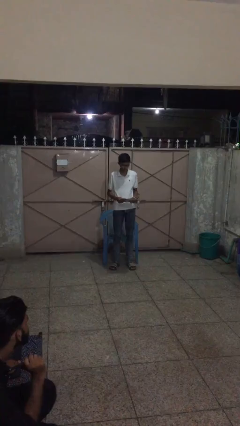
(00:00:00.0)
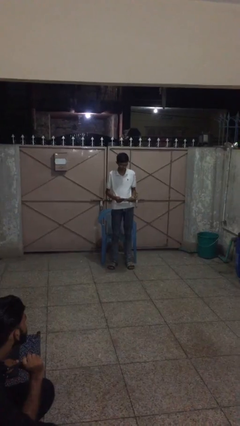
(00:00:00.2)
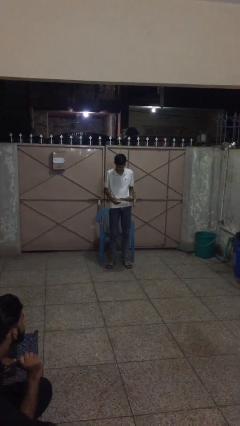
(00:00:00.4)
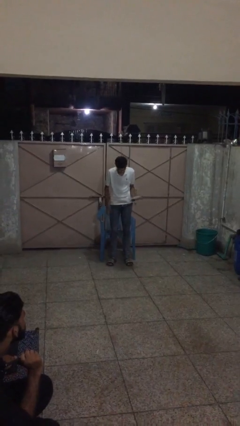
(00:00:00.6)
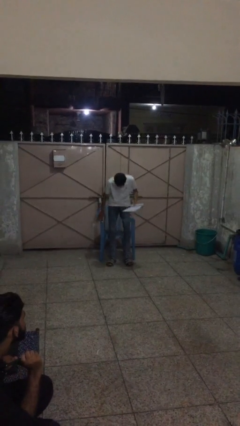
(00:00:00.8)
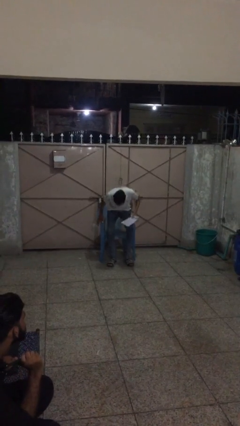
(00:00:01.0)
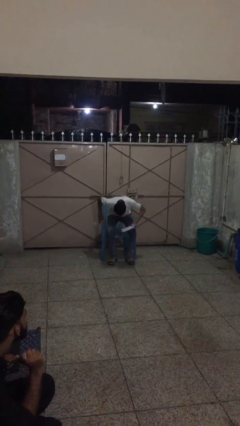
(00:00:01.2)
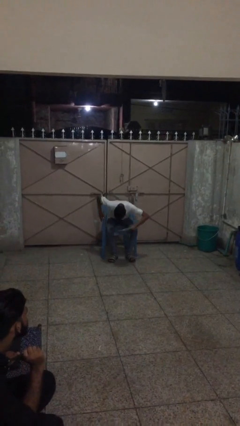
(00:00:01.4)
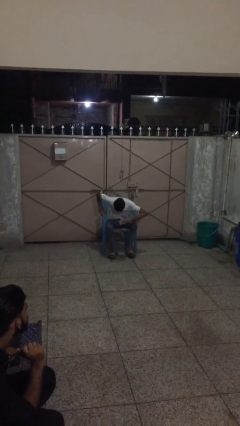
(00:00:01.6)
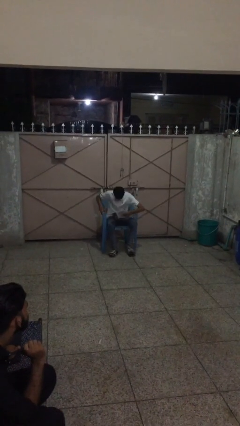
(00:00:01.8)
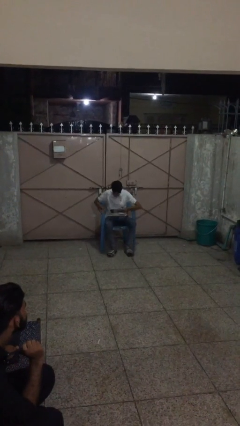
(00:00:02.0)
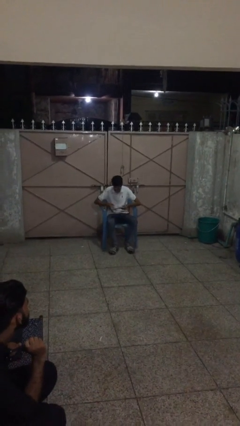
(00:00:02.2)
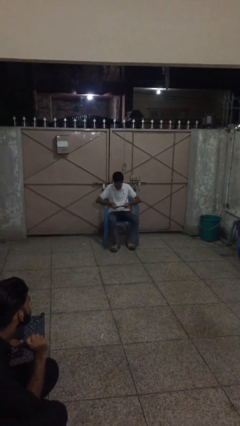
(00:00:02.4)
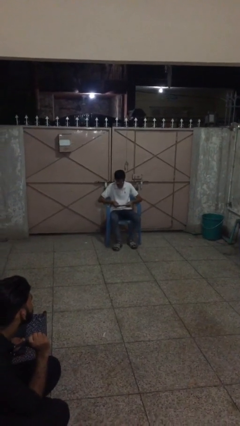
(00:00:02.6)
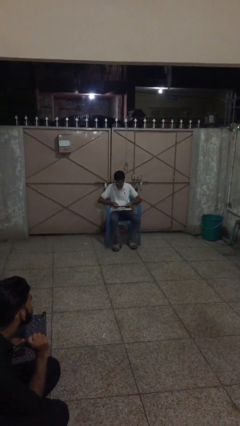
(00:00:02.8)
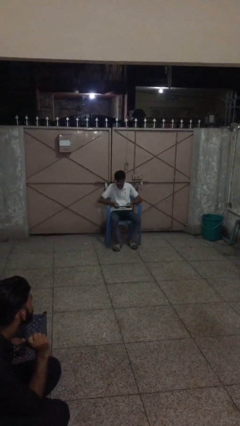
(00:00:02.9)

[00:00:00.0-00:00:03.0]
person sits down

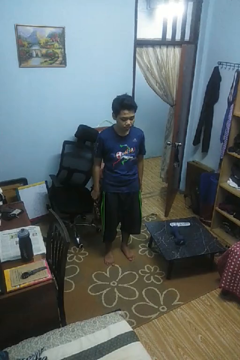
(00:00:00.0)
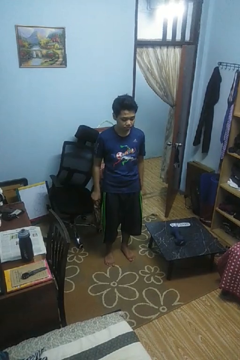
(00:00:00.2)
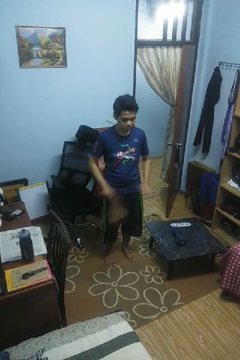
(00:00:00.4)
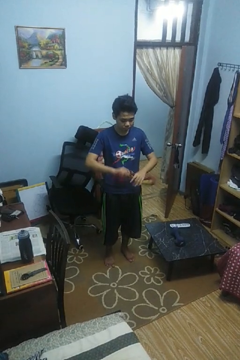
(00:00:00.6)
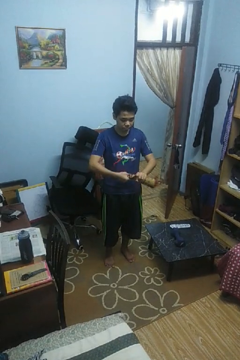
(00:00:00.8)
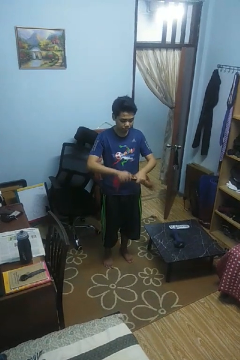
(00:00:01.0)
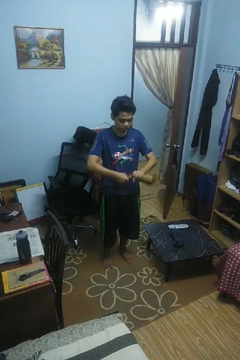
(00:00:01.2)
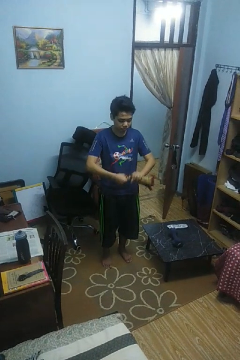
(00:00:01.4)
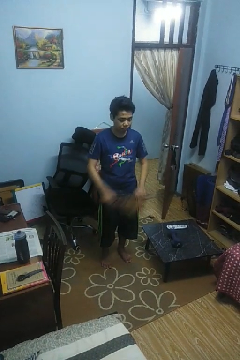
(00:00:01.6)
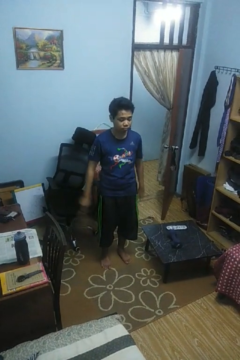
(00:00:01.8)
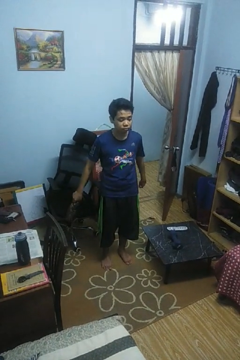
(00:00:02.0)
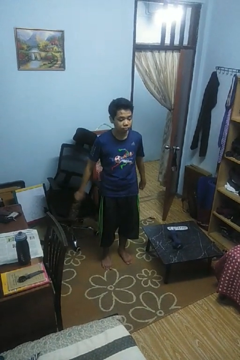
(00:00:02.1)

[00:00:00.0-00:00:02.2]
person squeezes object

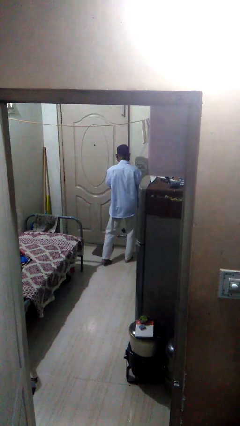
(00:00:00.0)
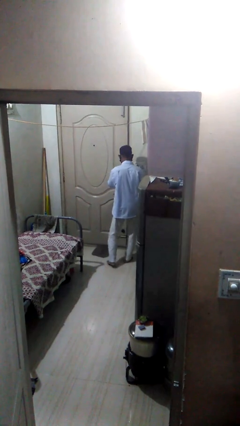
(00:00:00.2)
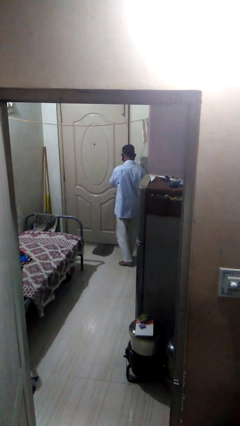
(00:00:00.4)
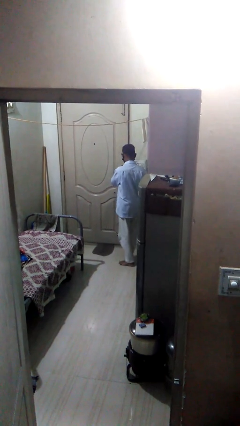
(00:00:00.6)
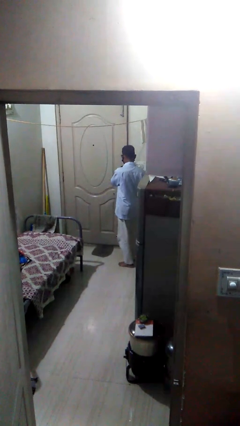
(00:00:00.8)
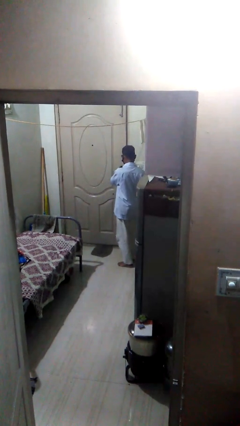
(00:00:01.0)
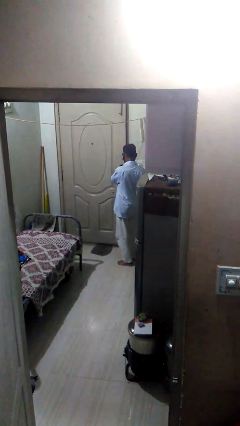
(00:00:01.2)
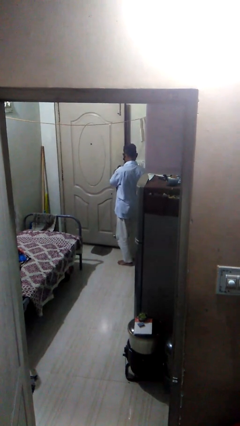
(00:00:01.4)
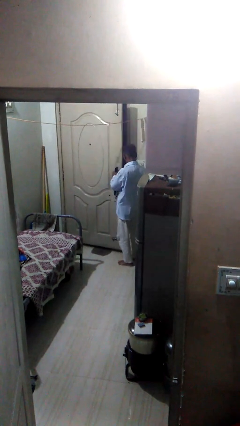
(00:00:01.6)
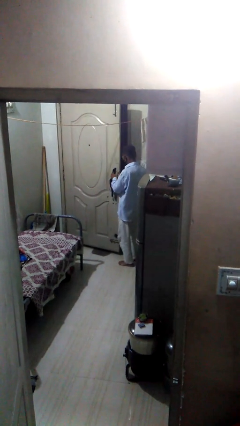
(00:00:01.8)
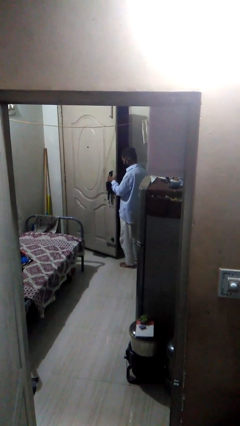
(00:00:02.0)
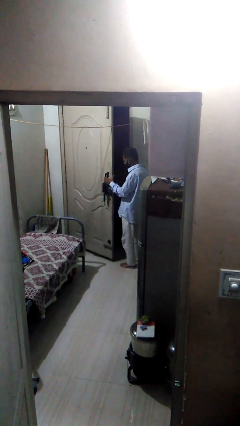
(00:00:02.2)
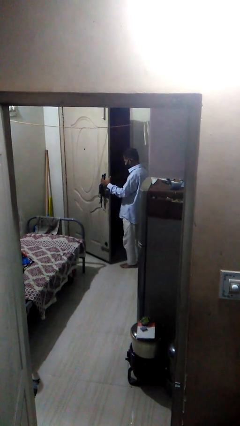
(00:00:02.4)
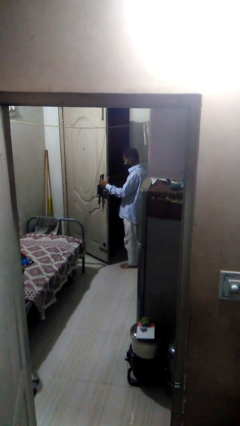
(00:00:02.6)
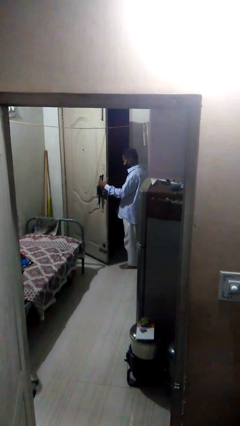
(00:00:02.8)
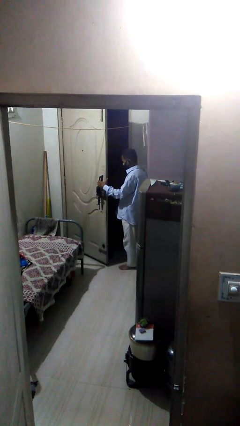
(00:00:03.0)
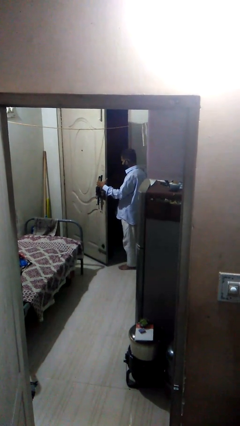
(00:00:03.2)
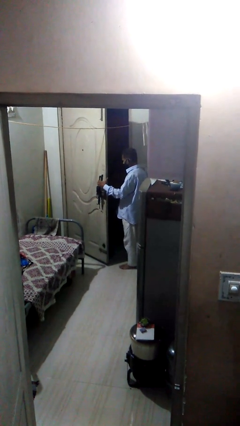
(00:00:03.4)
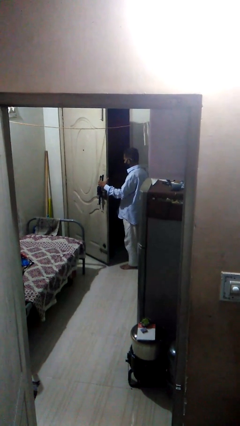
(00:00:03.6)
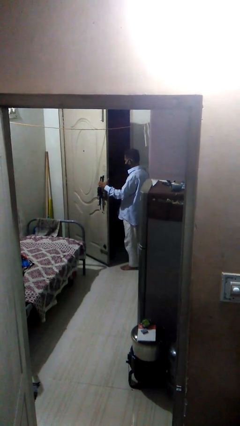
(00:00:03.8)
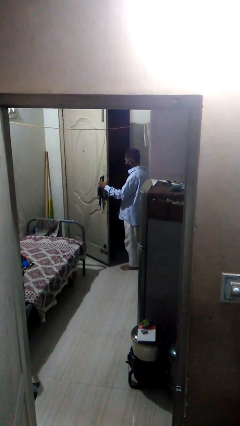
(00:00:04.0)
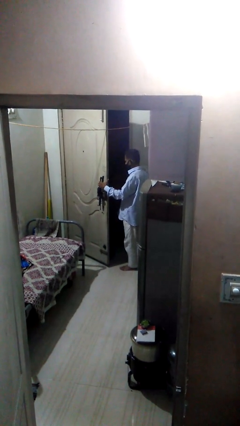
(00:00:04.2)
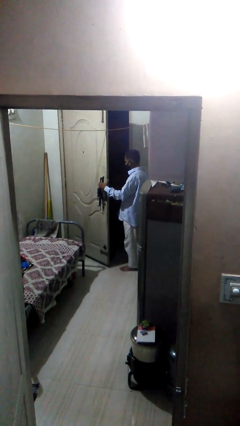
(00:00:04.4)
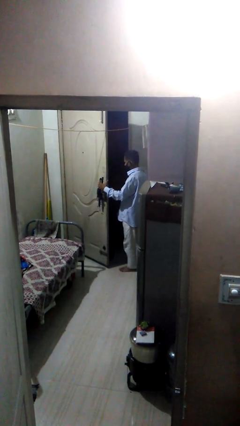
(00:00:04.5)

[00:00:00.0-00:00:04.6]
person opens facility door

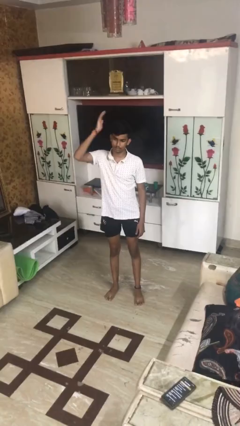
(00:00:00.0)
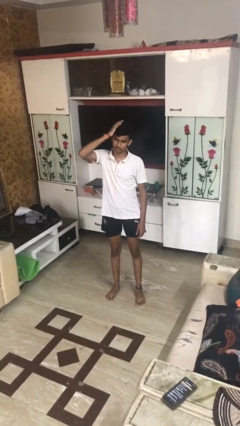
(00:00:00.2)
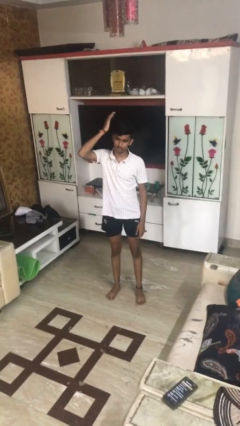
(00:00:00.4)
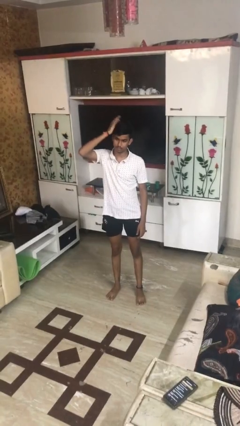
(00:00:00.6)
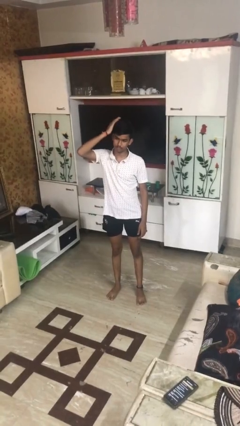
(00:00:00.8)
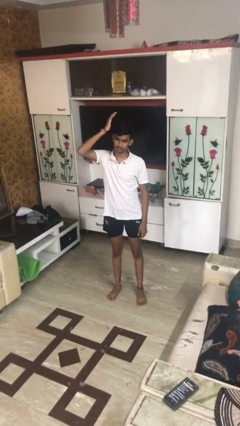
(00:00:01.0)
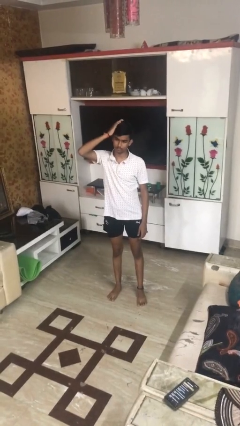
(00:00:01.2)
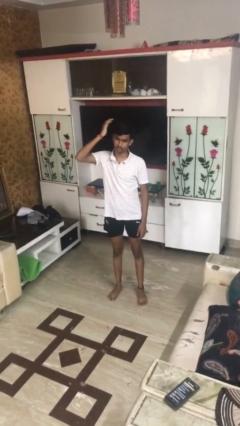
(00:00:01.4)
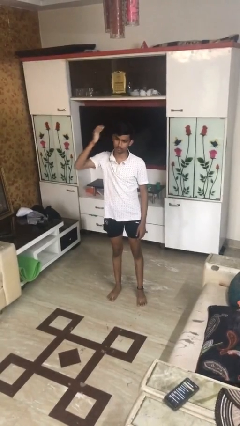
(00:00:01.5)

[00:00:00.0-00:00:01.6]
person pats head

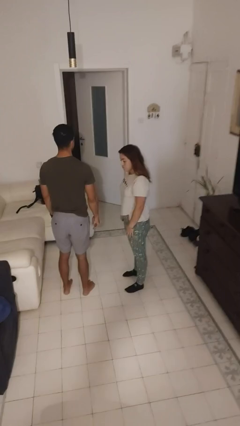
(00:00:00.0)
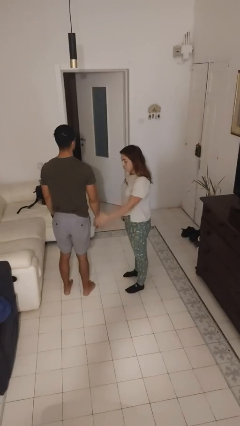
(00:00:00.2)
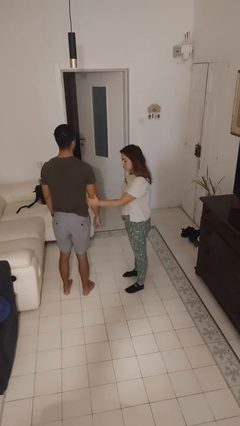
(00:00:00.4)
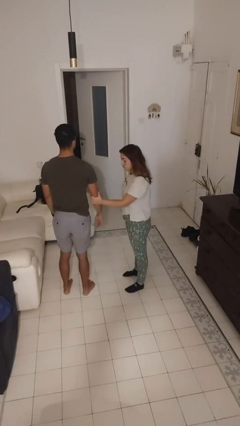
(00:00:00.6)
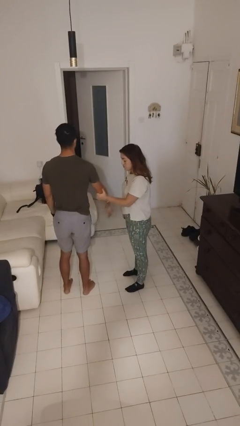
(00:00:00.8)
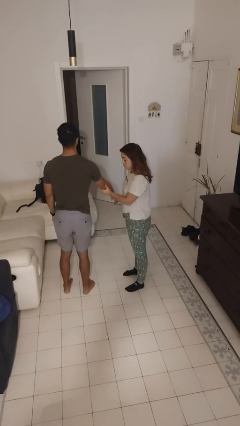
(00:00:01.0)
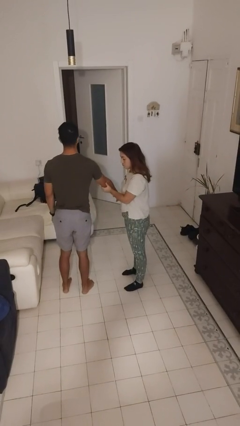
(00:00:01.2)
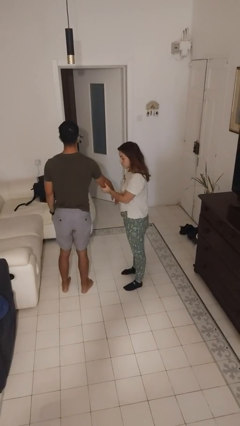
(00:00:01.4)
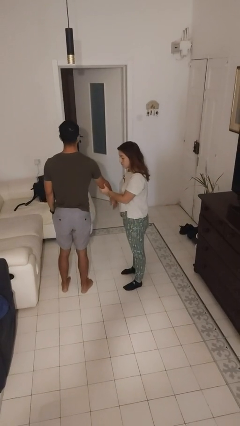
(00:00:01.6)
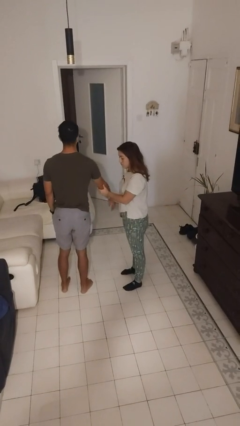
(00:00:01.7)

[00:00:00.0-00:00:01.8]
person grabs person by forearm

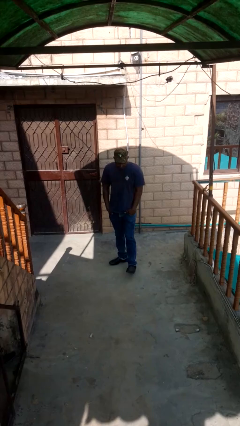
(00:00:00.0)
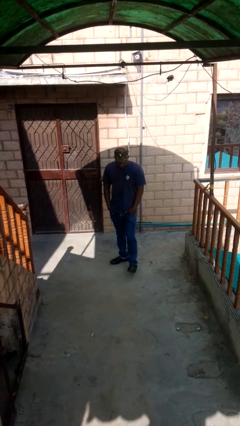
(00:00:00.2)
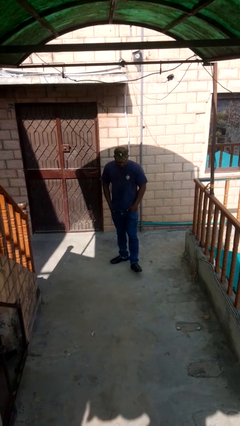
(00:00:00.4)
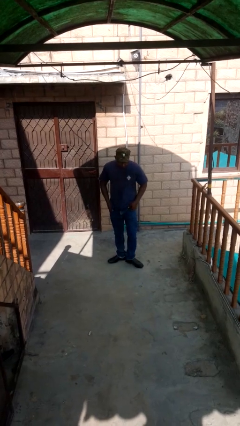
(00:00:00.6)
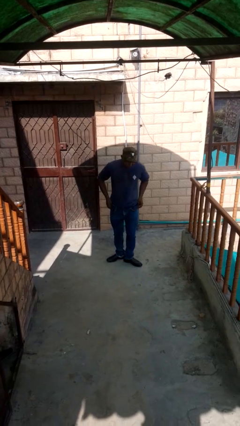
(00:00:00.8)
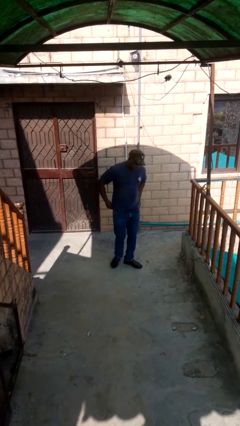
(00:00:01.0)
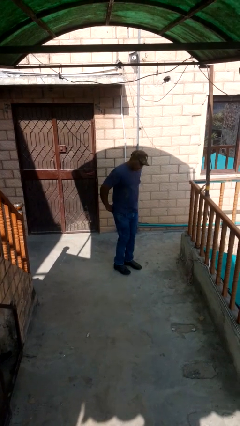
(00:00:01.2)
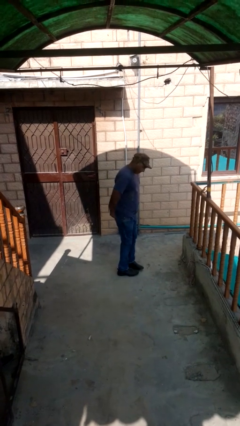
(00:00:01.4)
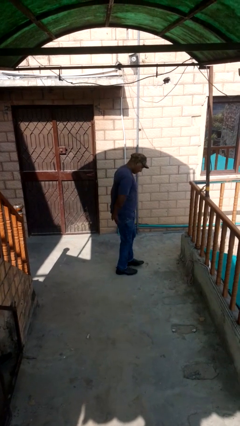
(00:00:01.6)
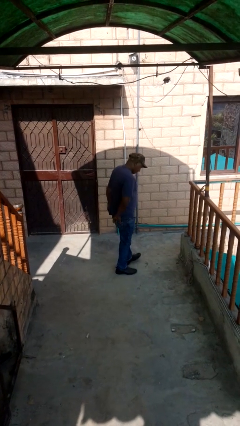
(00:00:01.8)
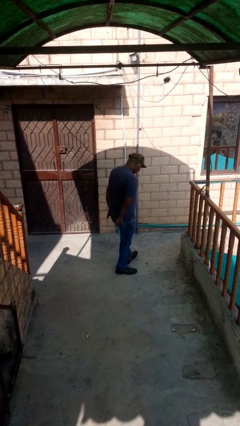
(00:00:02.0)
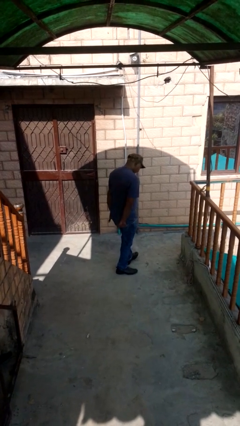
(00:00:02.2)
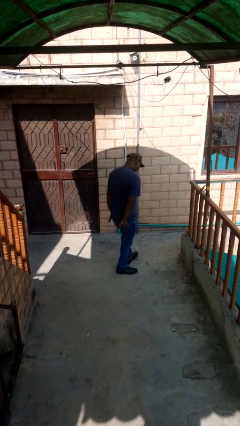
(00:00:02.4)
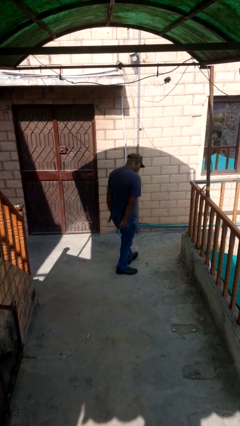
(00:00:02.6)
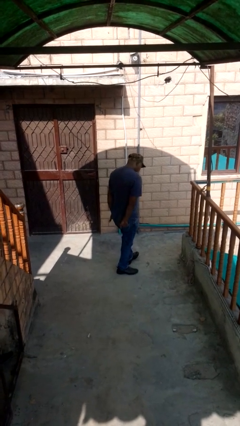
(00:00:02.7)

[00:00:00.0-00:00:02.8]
person puts hands in back pockets

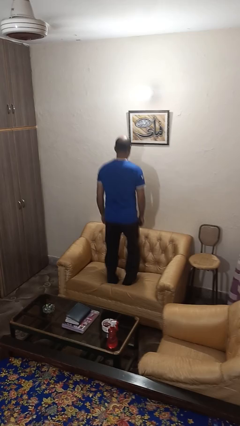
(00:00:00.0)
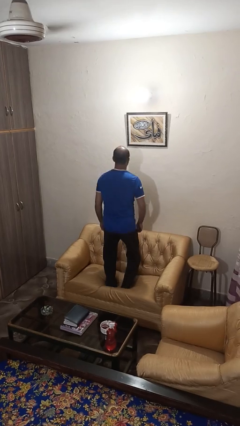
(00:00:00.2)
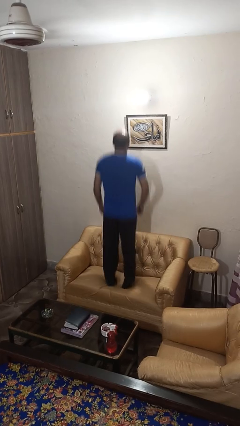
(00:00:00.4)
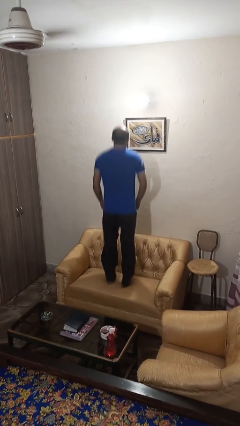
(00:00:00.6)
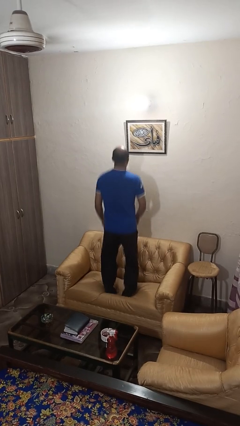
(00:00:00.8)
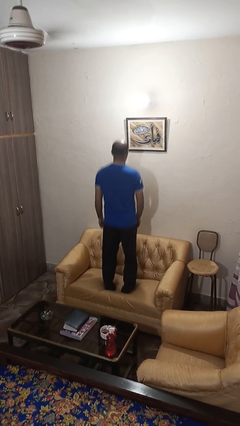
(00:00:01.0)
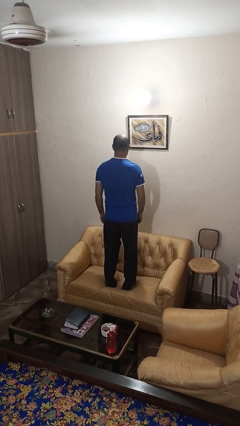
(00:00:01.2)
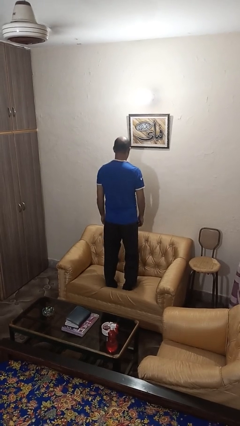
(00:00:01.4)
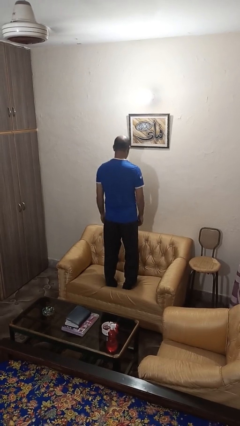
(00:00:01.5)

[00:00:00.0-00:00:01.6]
person jumps on couch
